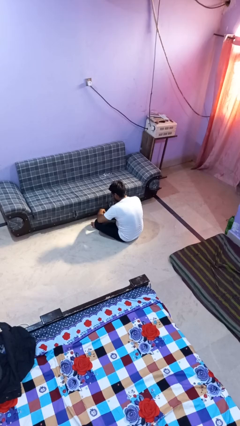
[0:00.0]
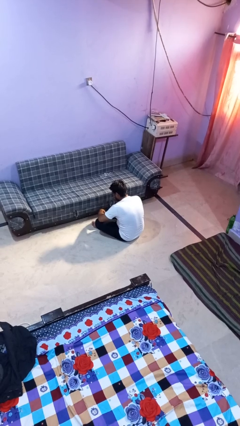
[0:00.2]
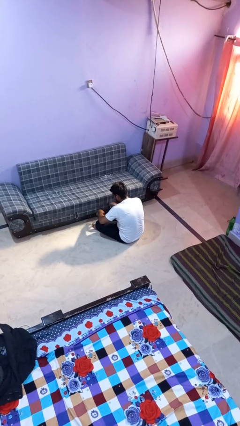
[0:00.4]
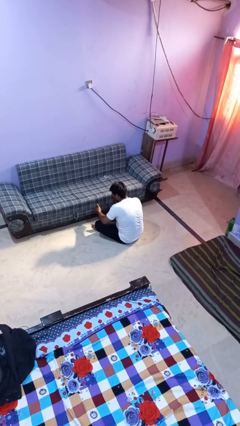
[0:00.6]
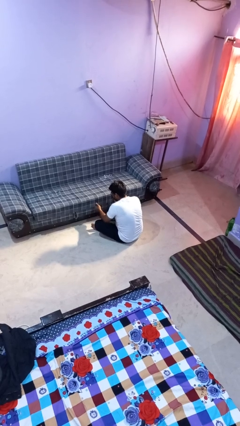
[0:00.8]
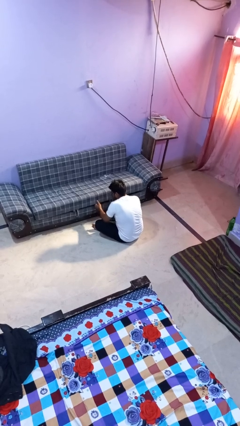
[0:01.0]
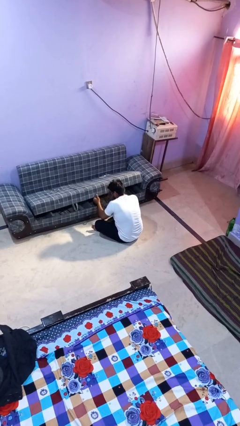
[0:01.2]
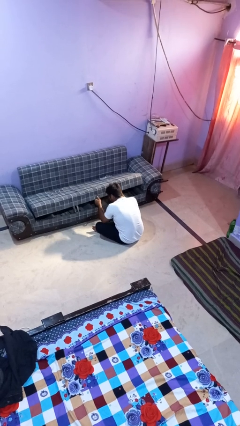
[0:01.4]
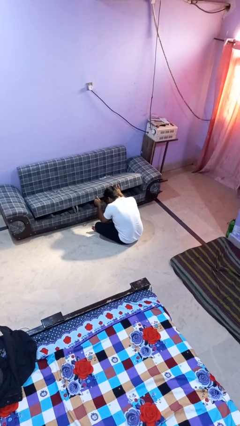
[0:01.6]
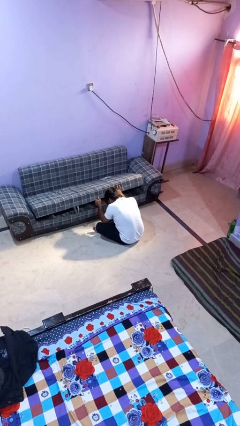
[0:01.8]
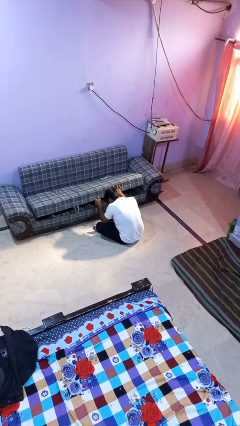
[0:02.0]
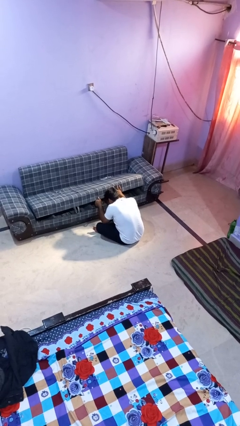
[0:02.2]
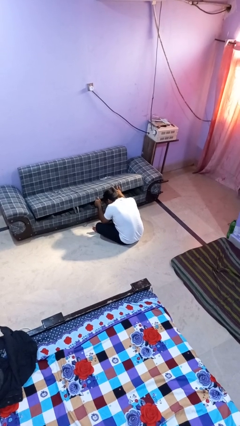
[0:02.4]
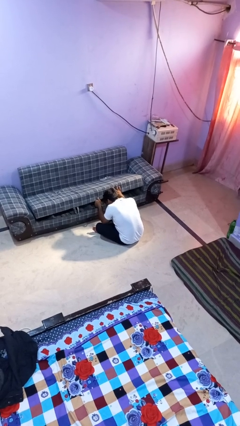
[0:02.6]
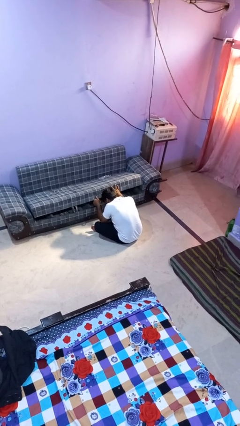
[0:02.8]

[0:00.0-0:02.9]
person searches under couch

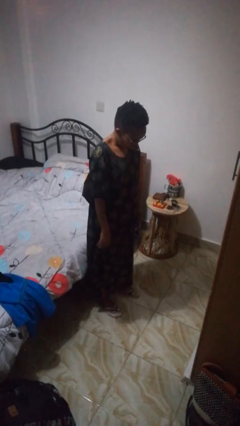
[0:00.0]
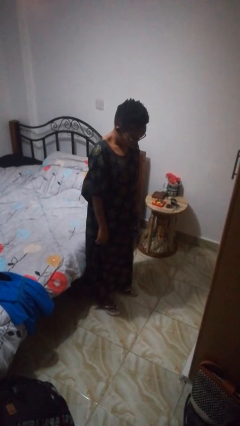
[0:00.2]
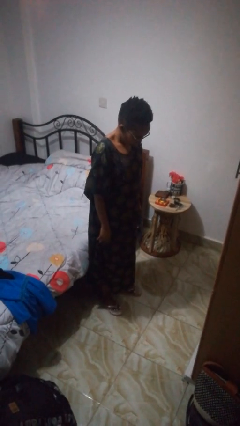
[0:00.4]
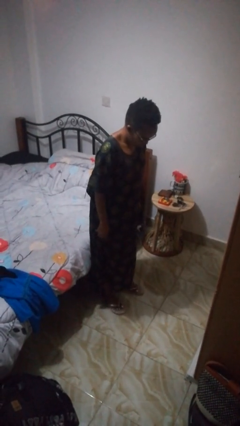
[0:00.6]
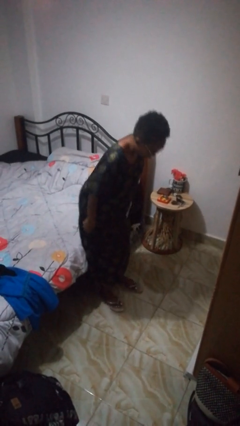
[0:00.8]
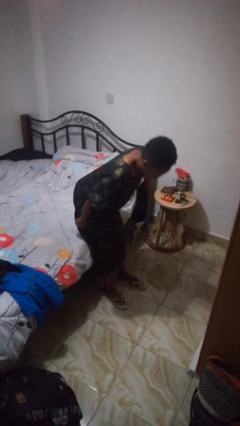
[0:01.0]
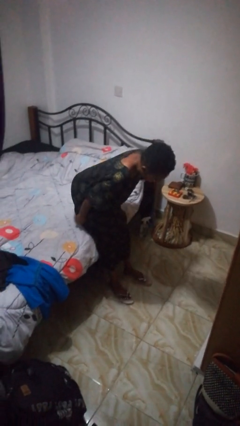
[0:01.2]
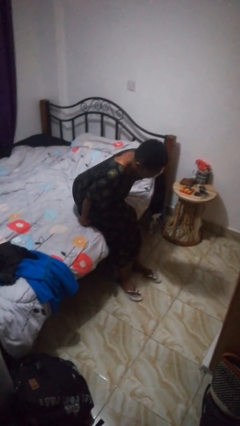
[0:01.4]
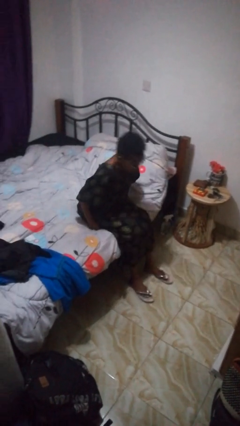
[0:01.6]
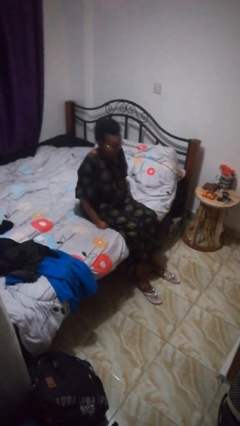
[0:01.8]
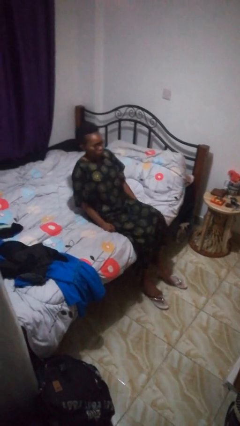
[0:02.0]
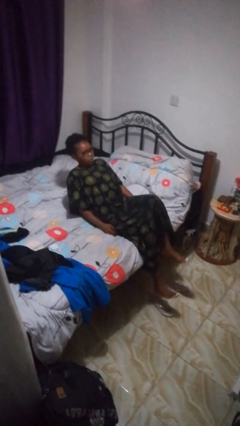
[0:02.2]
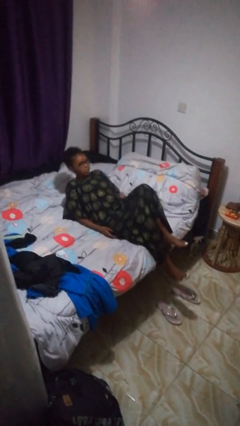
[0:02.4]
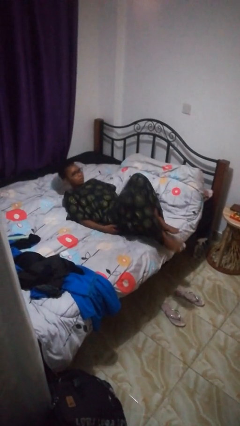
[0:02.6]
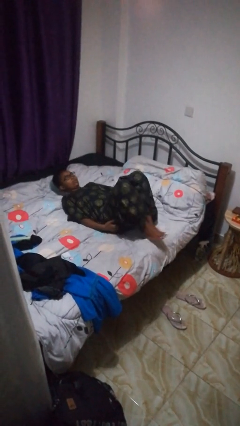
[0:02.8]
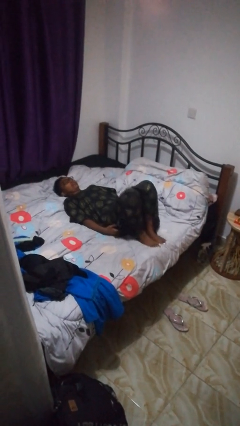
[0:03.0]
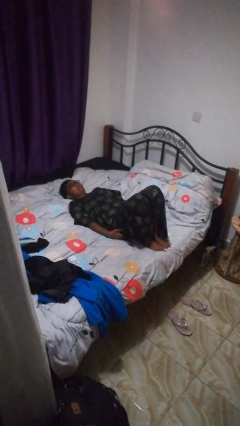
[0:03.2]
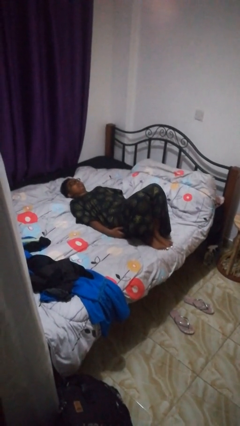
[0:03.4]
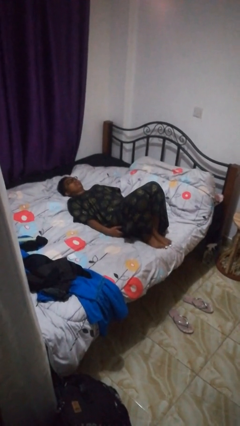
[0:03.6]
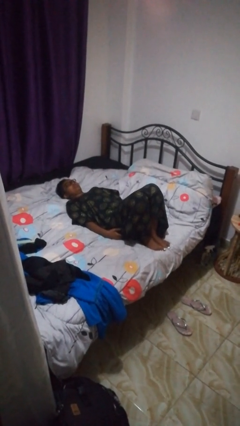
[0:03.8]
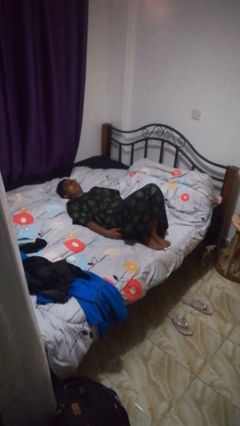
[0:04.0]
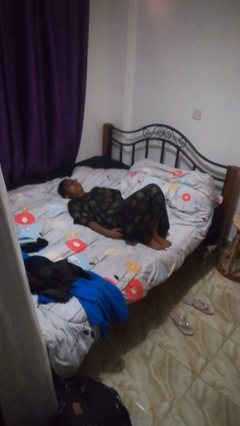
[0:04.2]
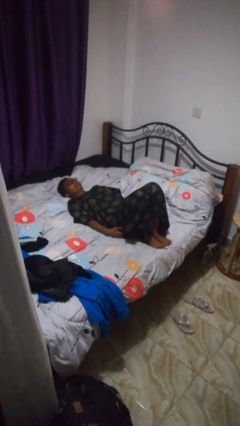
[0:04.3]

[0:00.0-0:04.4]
person lies down on bed

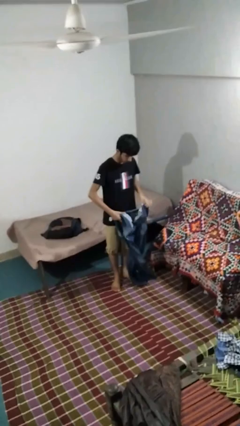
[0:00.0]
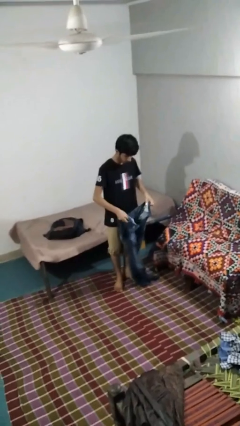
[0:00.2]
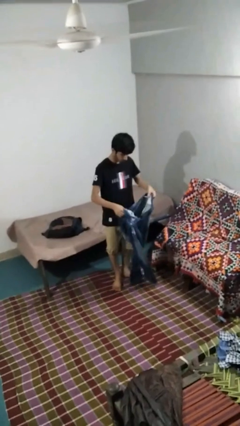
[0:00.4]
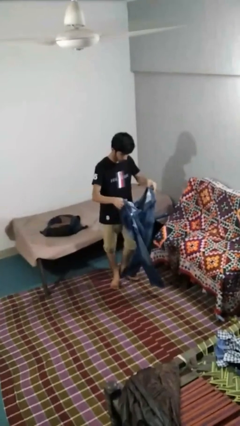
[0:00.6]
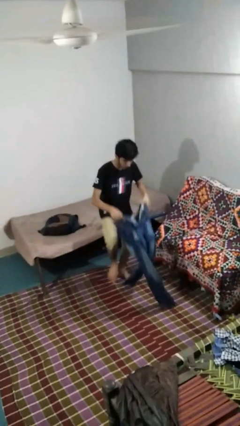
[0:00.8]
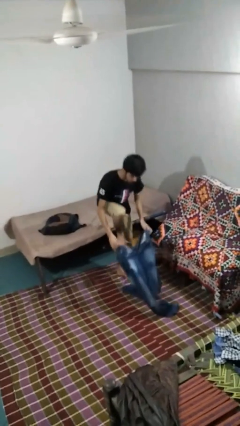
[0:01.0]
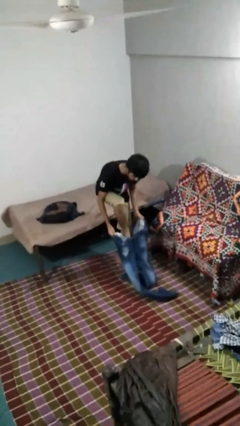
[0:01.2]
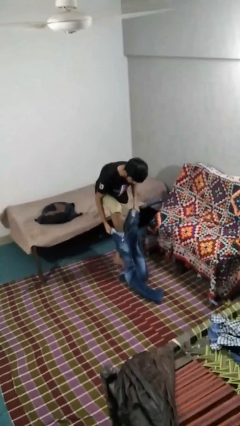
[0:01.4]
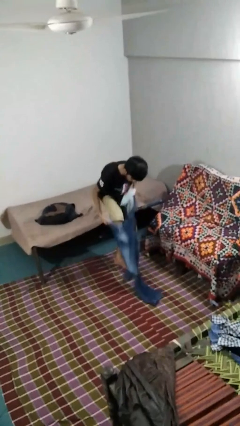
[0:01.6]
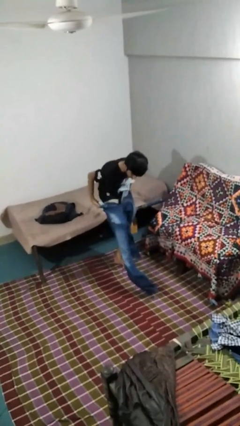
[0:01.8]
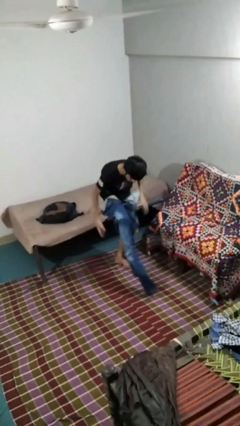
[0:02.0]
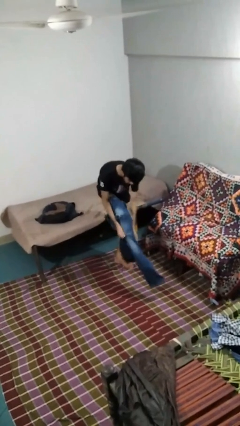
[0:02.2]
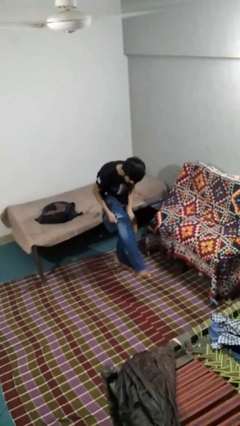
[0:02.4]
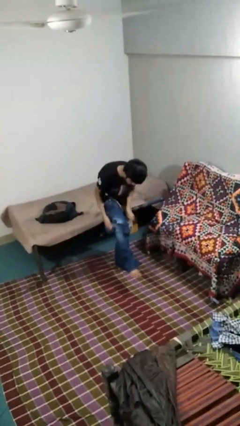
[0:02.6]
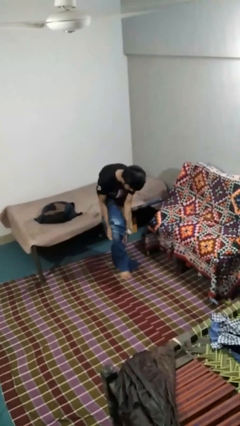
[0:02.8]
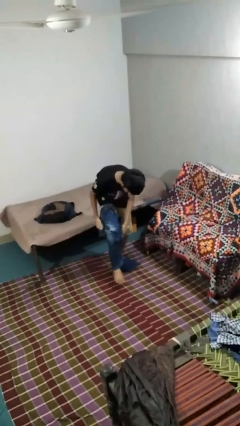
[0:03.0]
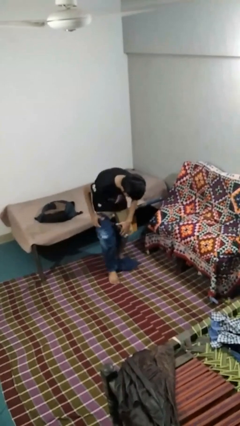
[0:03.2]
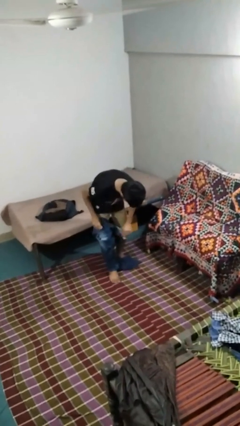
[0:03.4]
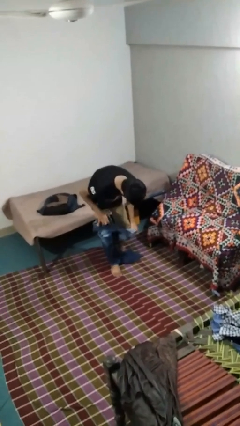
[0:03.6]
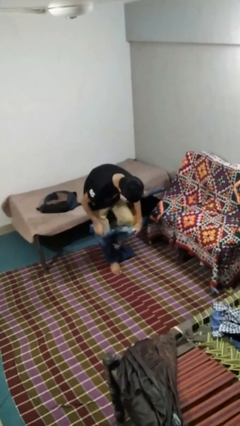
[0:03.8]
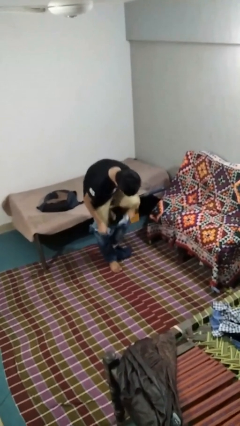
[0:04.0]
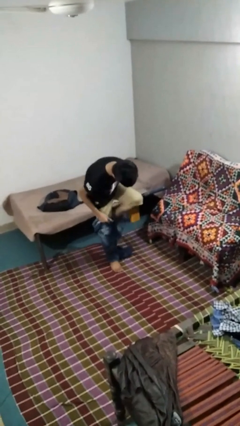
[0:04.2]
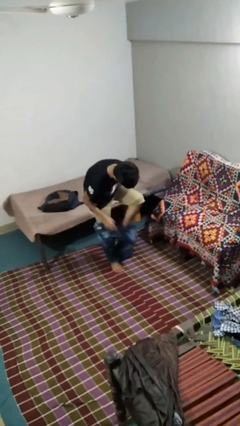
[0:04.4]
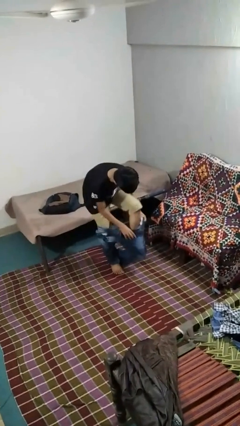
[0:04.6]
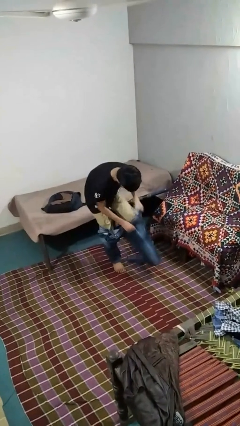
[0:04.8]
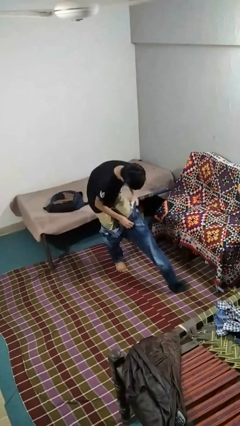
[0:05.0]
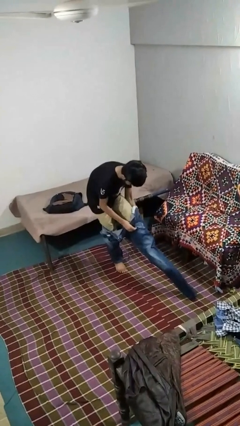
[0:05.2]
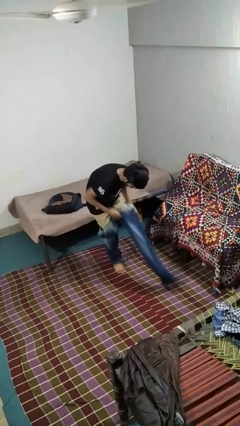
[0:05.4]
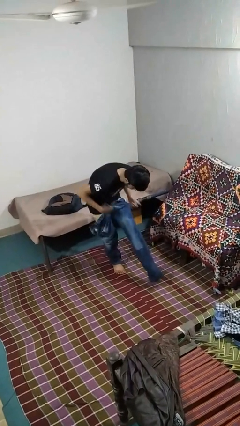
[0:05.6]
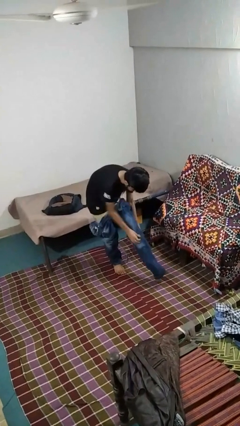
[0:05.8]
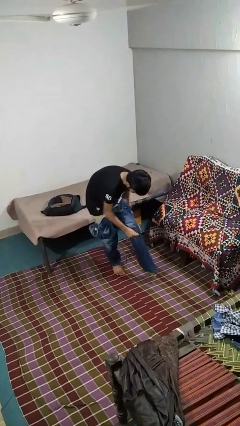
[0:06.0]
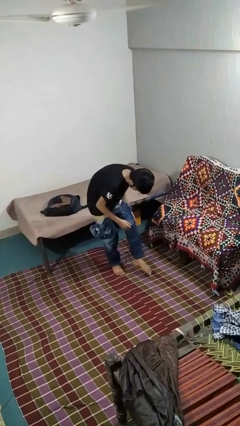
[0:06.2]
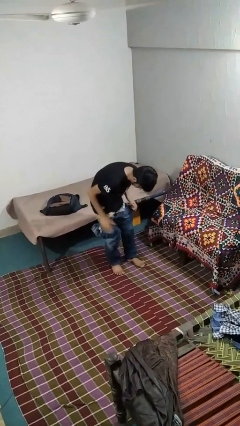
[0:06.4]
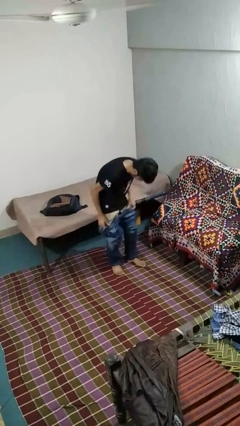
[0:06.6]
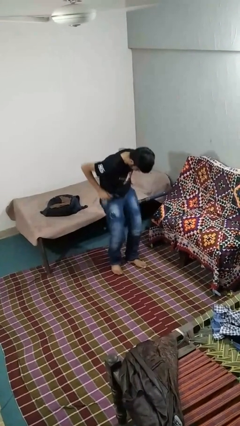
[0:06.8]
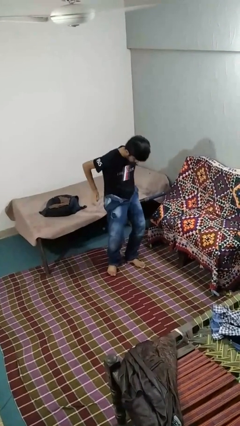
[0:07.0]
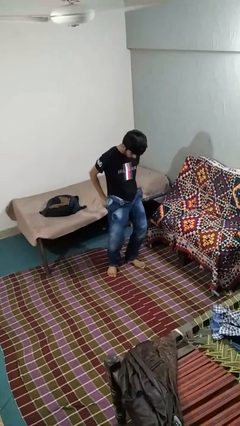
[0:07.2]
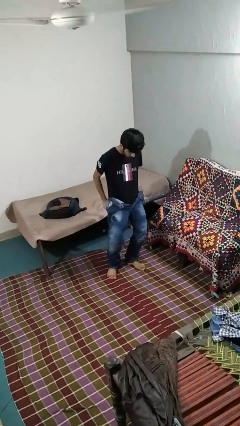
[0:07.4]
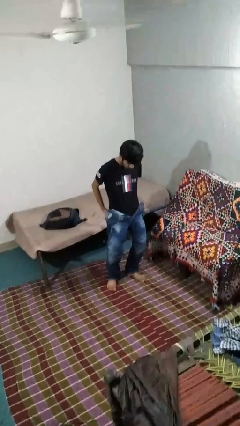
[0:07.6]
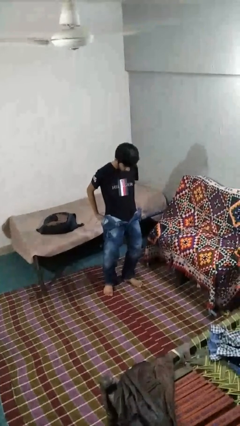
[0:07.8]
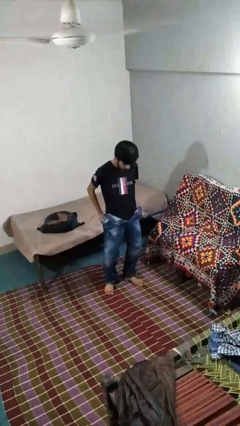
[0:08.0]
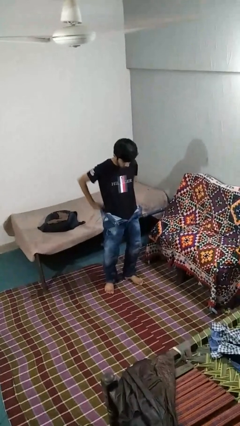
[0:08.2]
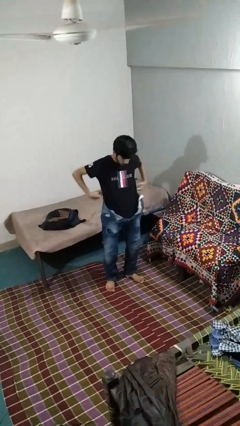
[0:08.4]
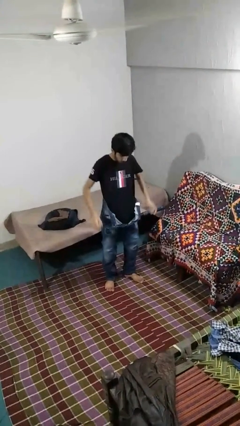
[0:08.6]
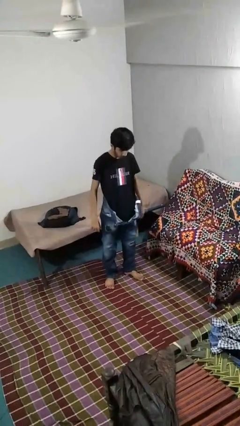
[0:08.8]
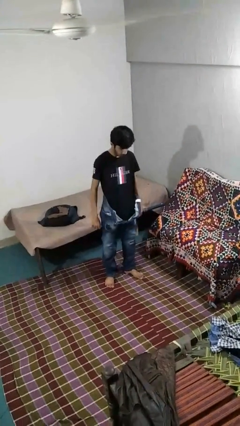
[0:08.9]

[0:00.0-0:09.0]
person puts on pants

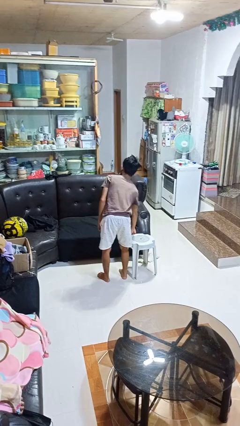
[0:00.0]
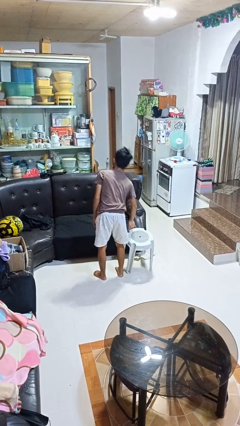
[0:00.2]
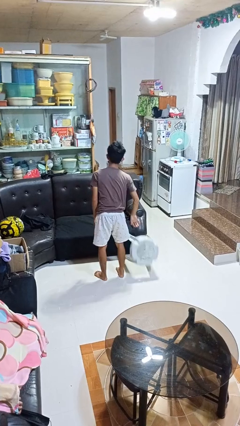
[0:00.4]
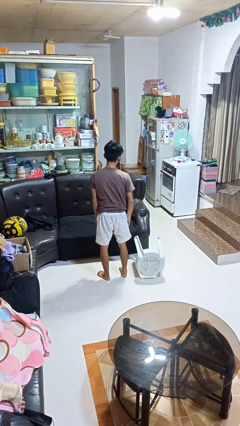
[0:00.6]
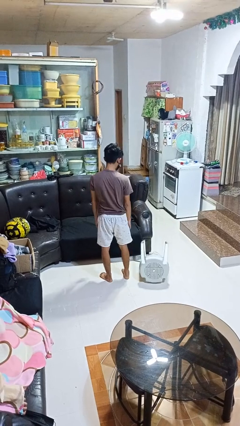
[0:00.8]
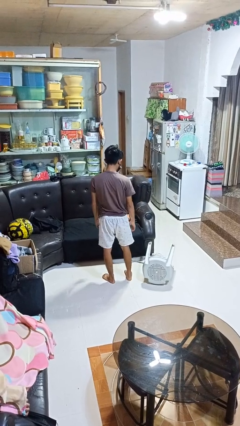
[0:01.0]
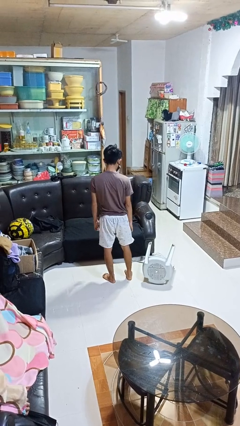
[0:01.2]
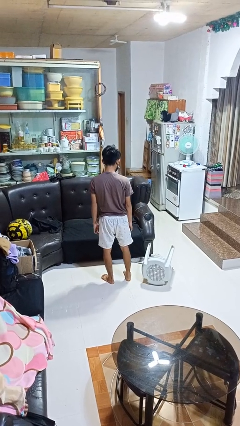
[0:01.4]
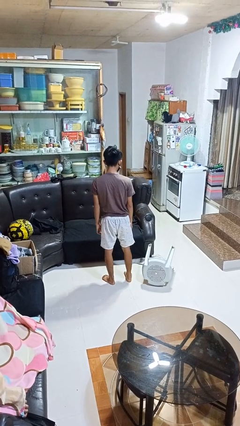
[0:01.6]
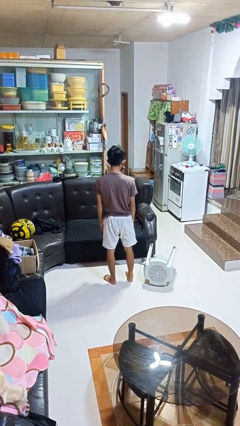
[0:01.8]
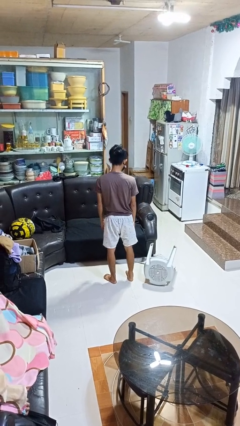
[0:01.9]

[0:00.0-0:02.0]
person knocks over furniture
